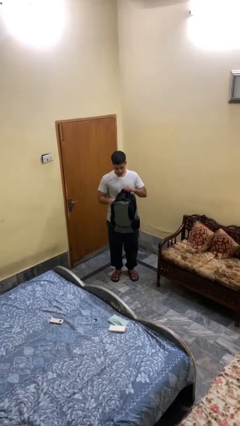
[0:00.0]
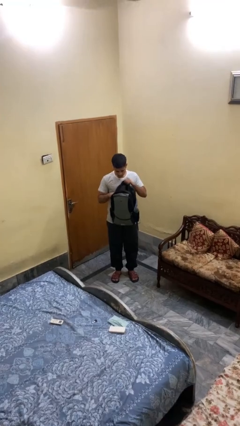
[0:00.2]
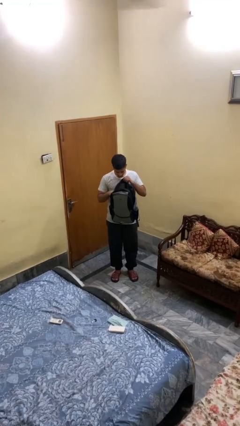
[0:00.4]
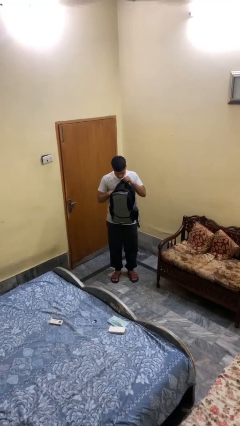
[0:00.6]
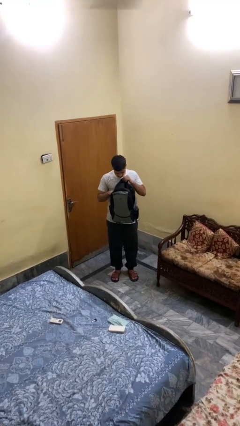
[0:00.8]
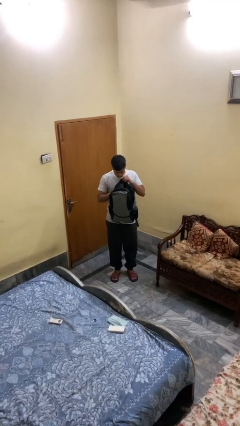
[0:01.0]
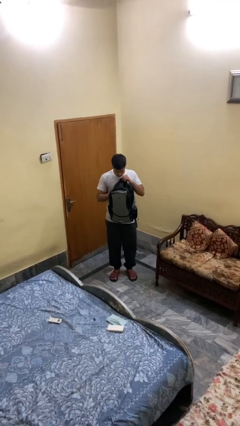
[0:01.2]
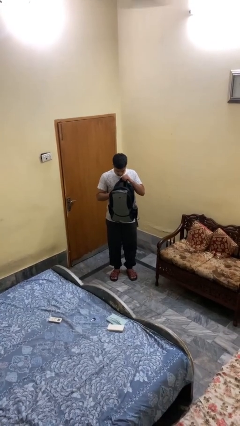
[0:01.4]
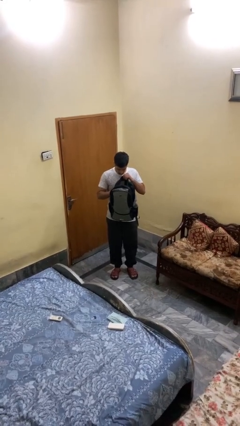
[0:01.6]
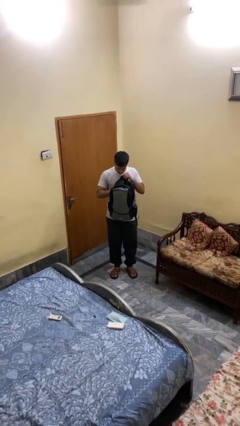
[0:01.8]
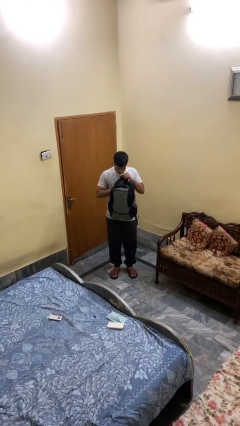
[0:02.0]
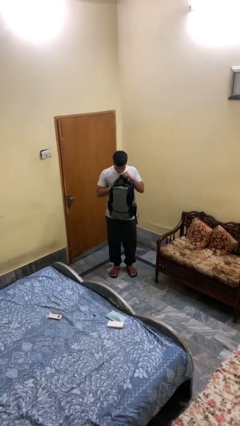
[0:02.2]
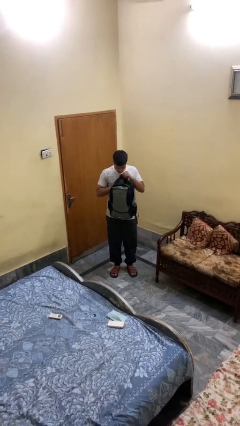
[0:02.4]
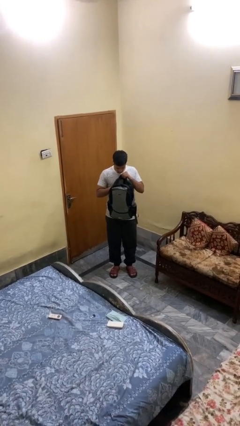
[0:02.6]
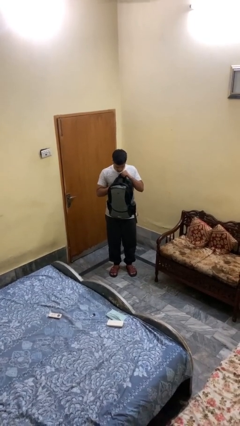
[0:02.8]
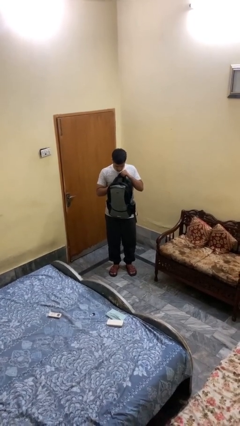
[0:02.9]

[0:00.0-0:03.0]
person searches in backpack

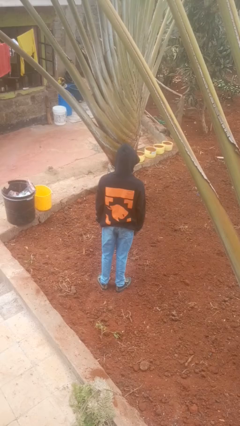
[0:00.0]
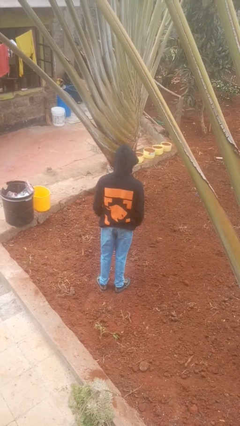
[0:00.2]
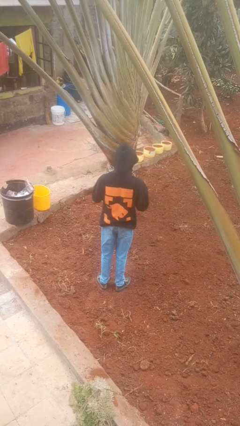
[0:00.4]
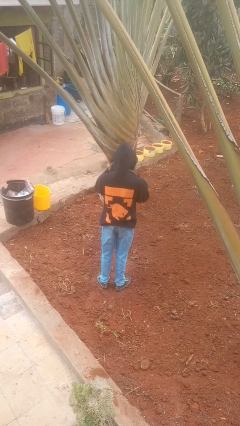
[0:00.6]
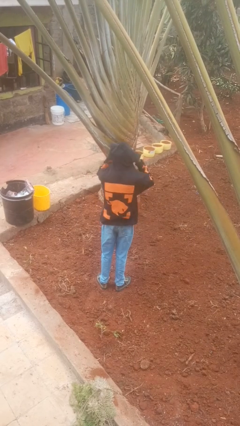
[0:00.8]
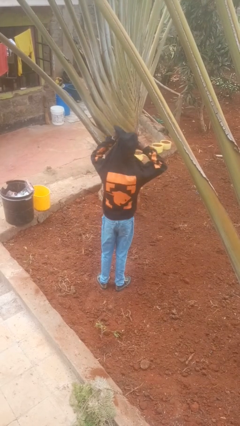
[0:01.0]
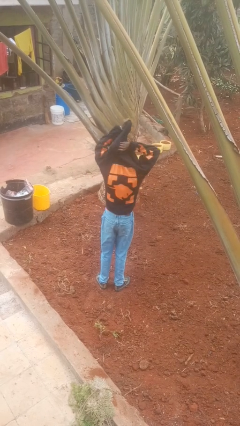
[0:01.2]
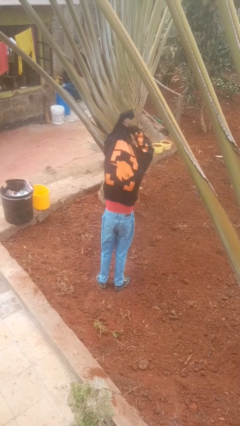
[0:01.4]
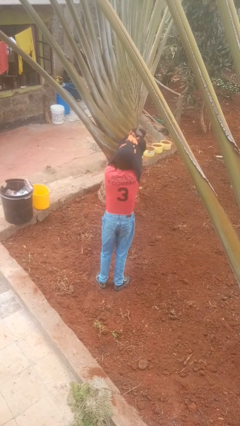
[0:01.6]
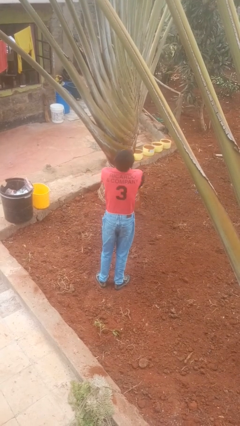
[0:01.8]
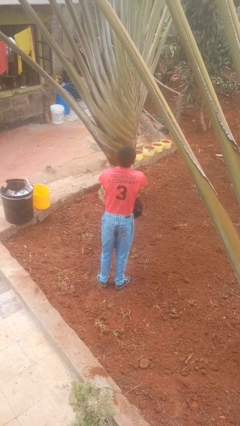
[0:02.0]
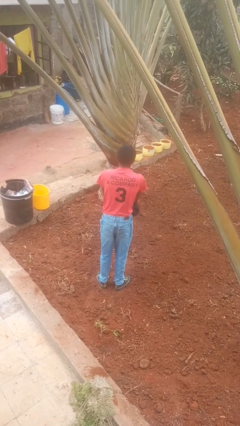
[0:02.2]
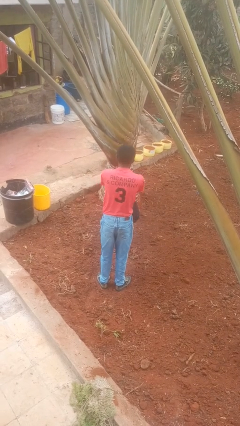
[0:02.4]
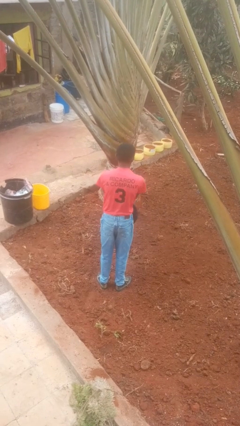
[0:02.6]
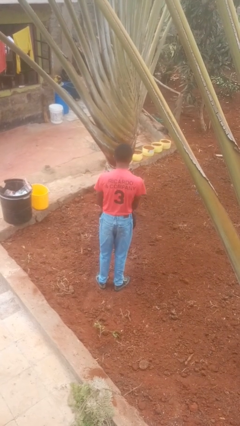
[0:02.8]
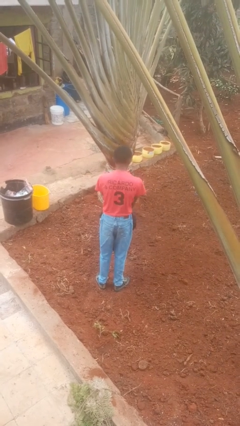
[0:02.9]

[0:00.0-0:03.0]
person takes off hoodie

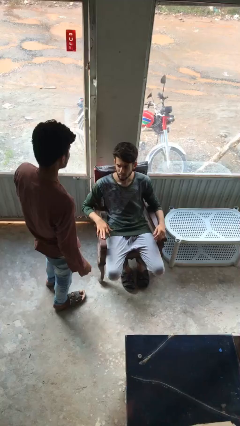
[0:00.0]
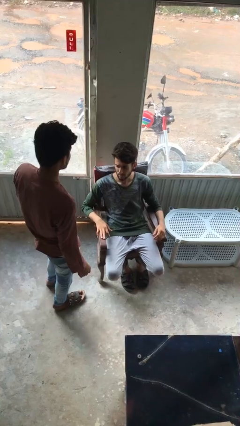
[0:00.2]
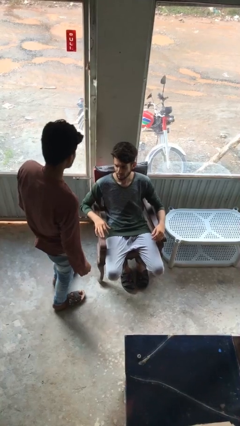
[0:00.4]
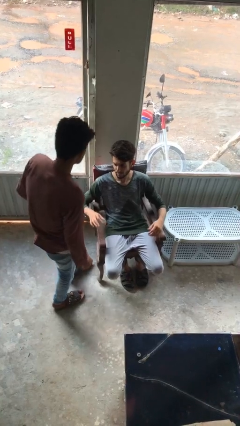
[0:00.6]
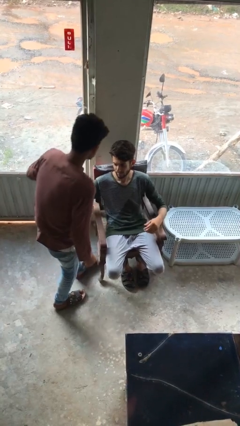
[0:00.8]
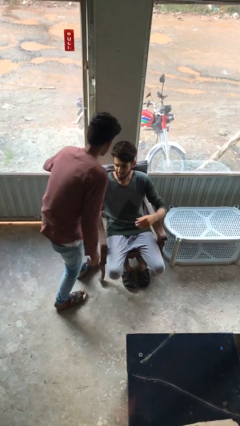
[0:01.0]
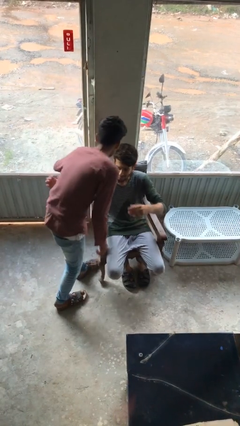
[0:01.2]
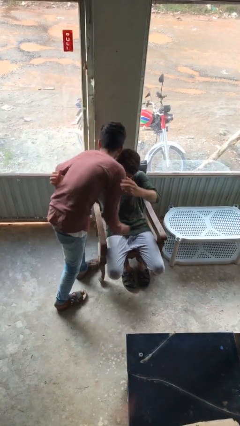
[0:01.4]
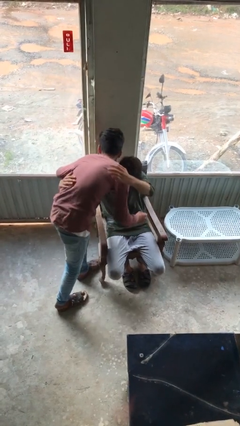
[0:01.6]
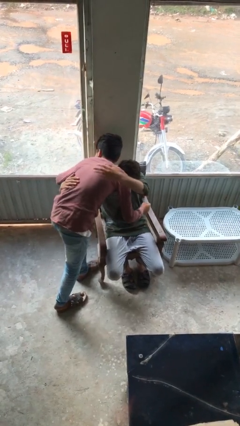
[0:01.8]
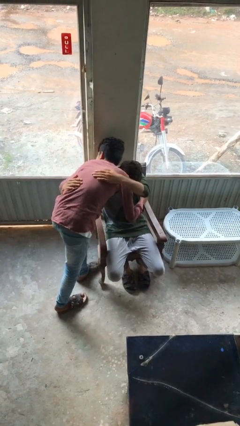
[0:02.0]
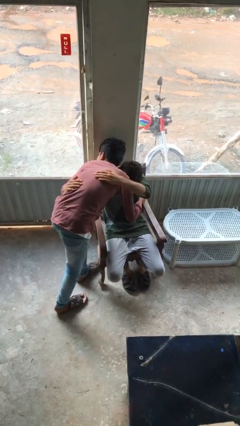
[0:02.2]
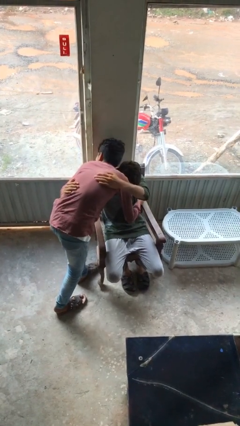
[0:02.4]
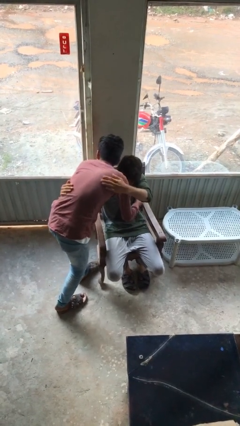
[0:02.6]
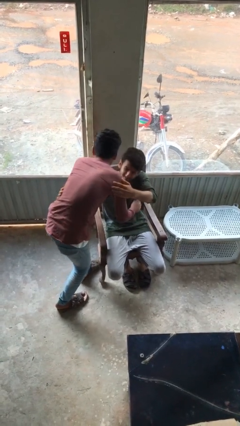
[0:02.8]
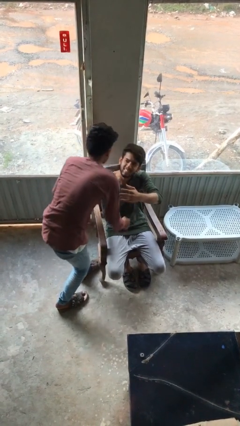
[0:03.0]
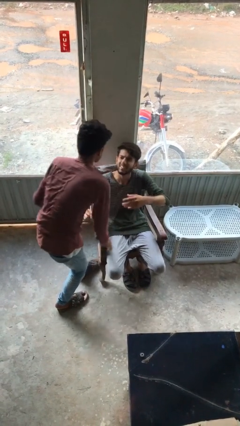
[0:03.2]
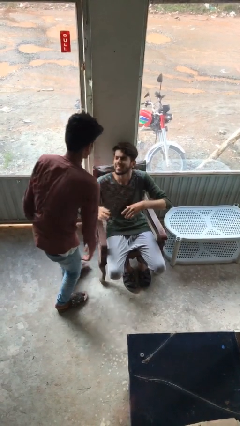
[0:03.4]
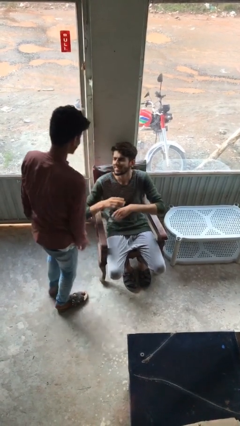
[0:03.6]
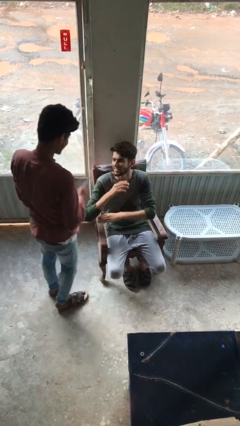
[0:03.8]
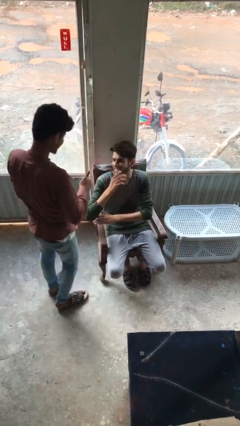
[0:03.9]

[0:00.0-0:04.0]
person embraces person

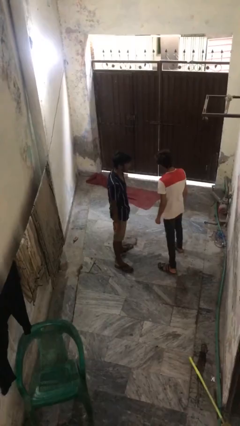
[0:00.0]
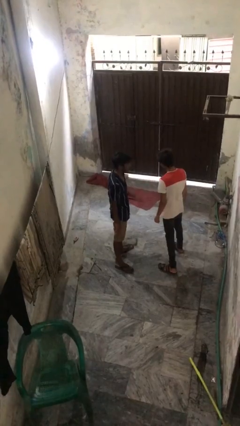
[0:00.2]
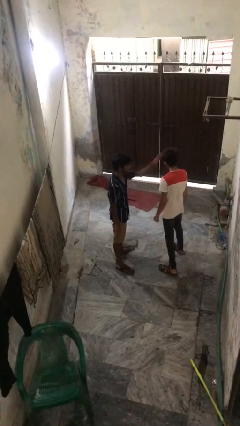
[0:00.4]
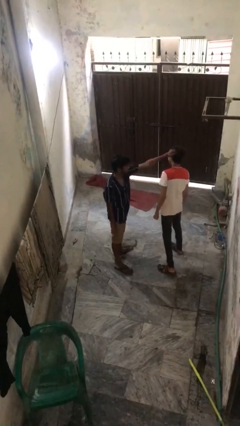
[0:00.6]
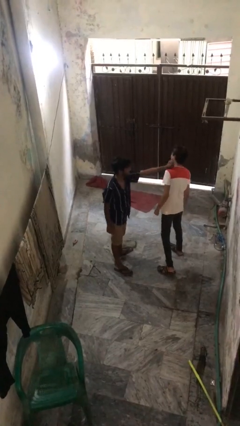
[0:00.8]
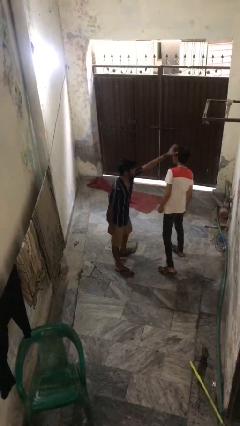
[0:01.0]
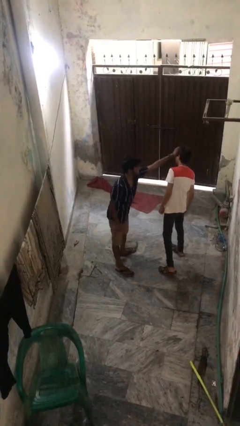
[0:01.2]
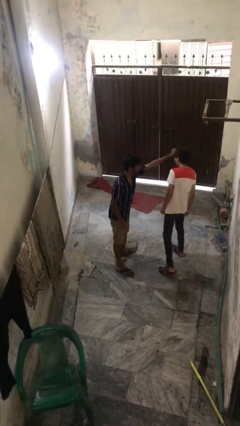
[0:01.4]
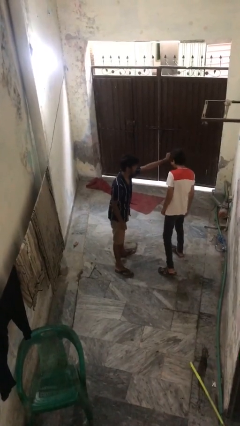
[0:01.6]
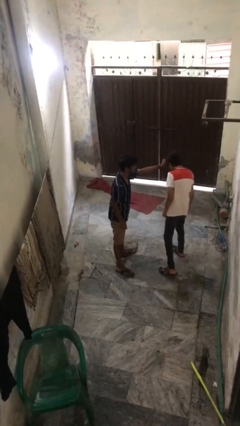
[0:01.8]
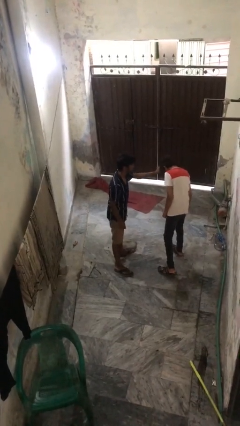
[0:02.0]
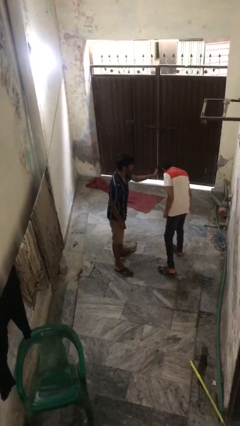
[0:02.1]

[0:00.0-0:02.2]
person grabs person by hair

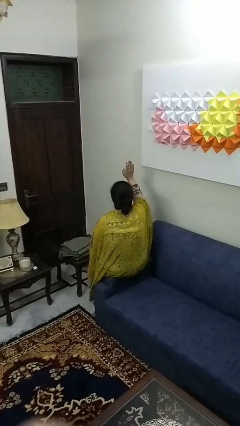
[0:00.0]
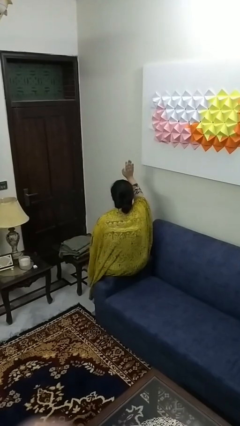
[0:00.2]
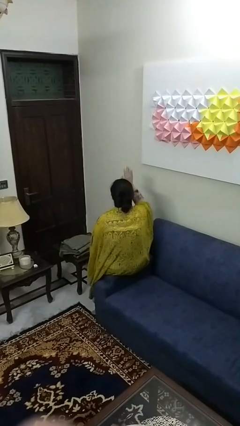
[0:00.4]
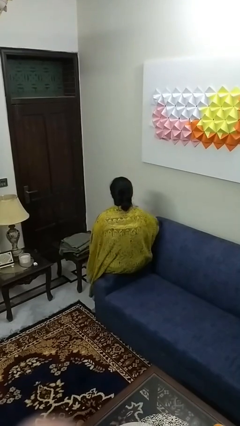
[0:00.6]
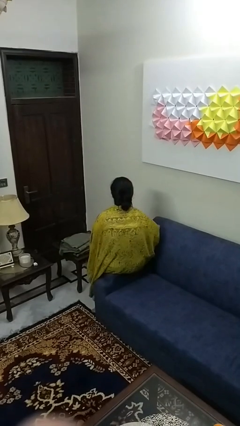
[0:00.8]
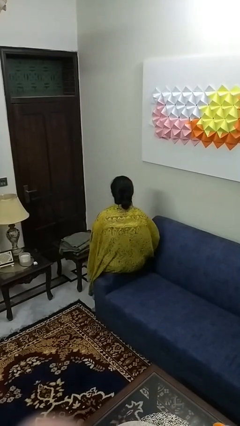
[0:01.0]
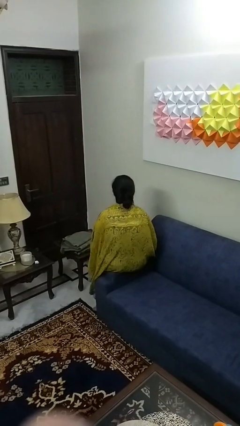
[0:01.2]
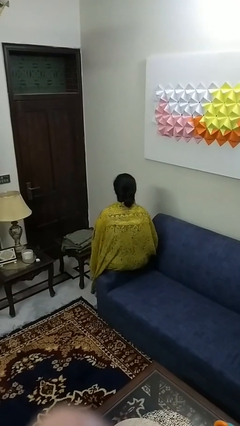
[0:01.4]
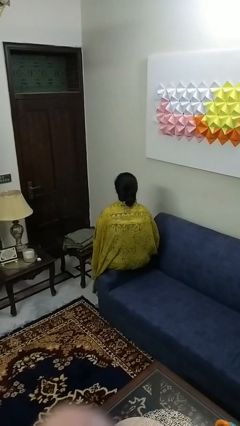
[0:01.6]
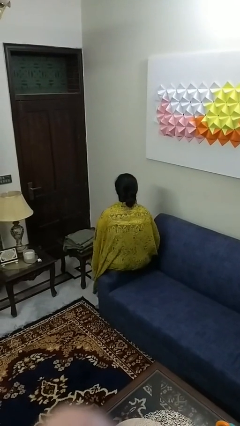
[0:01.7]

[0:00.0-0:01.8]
person gestures lower hand

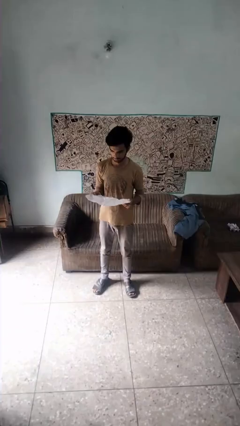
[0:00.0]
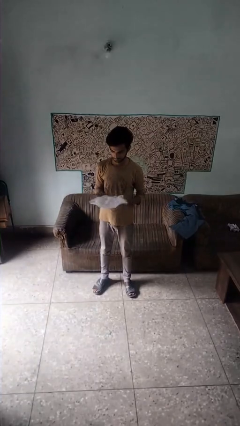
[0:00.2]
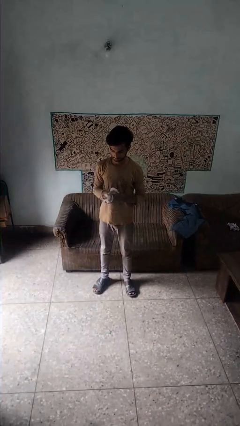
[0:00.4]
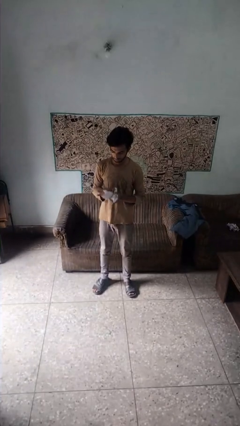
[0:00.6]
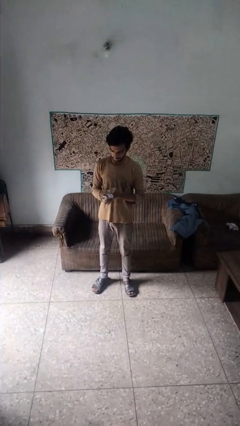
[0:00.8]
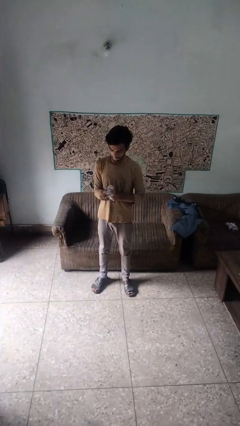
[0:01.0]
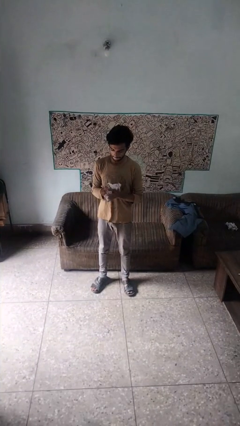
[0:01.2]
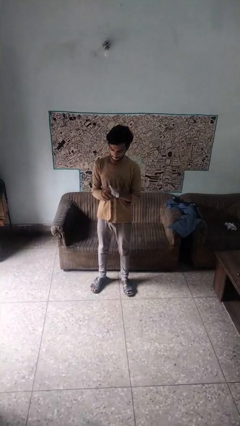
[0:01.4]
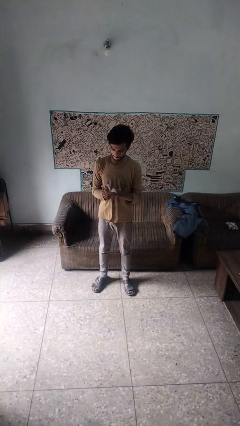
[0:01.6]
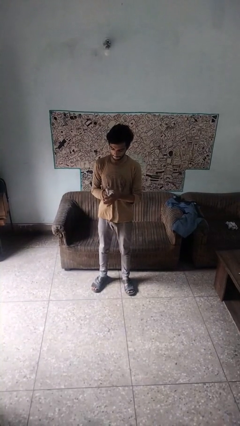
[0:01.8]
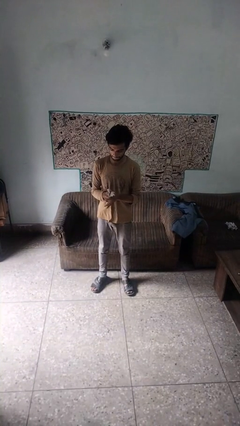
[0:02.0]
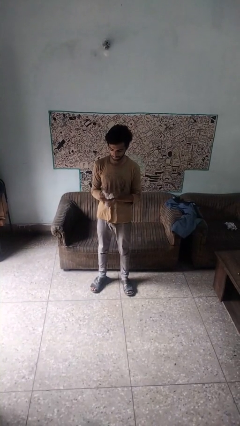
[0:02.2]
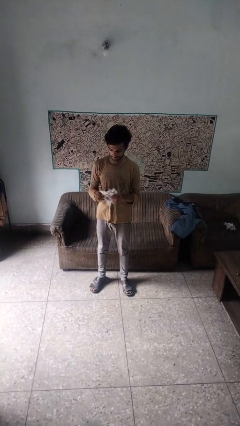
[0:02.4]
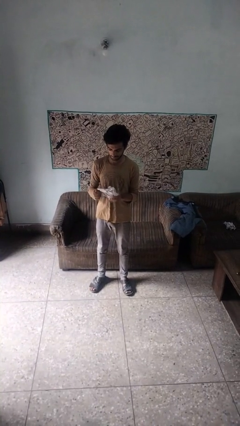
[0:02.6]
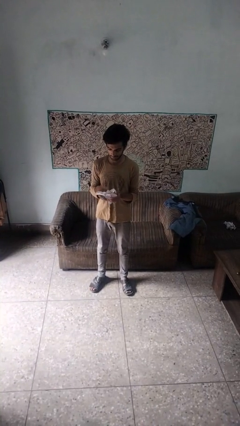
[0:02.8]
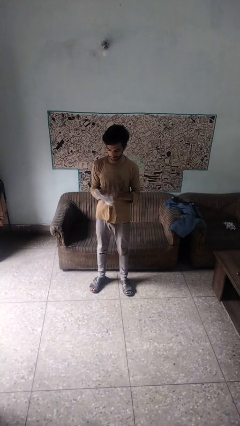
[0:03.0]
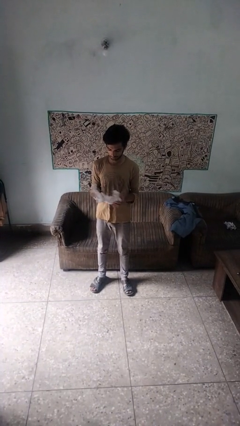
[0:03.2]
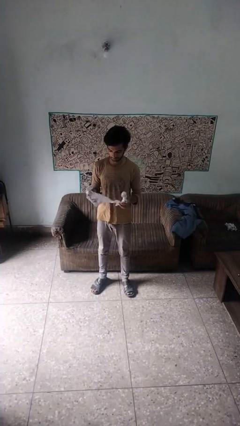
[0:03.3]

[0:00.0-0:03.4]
person crumples paper
